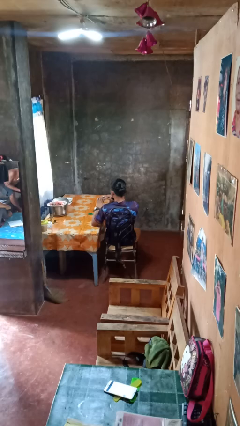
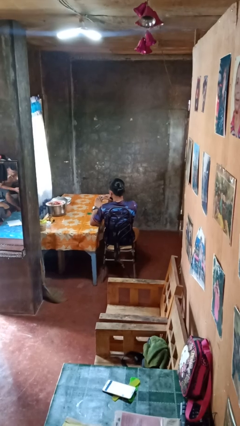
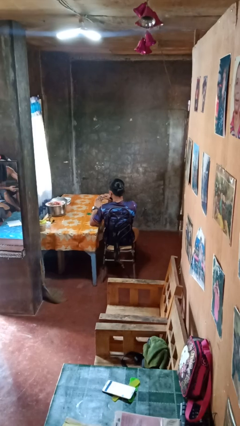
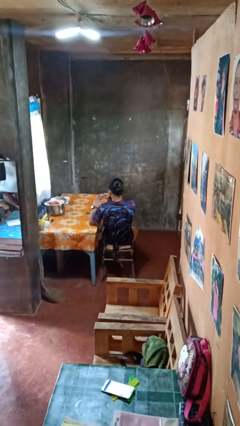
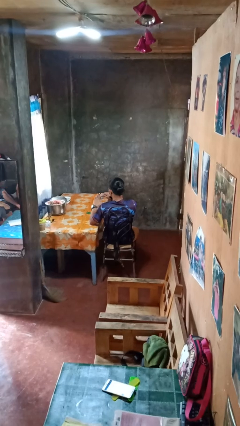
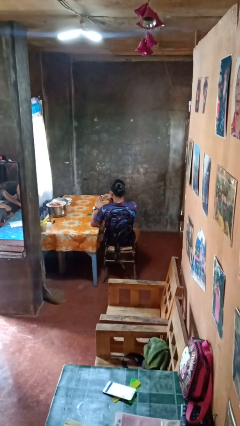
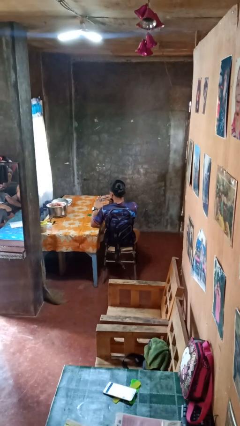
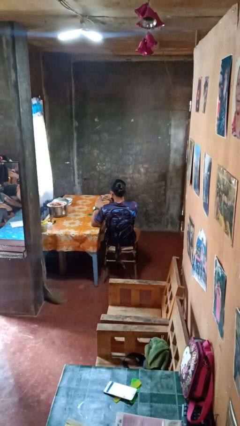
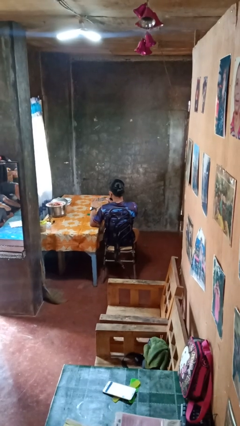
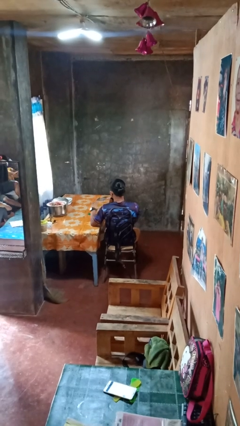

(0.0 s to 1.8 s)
person files fingernails

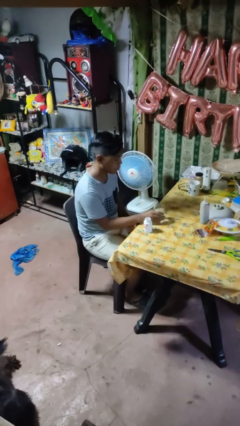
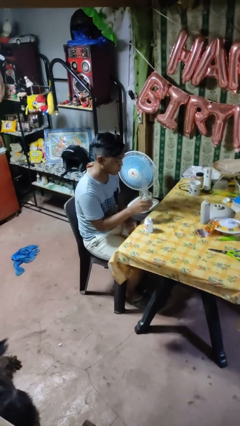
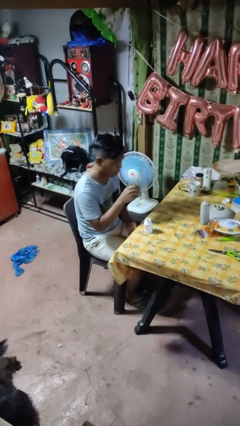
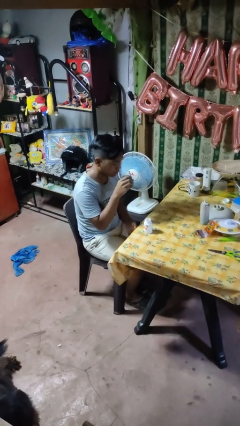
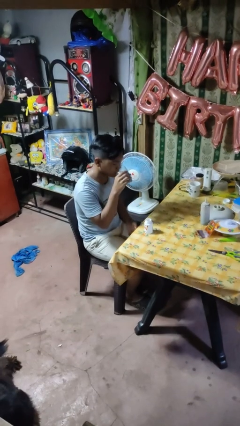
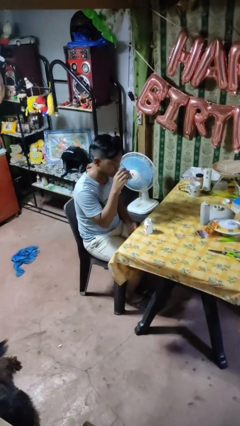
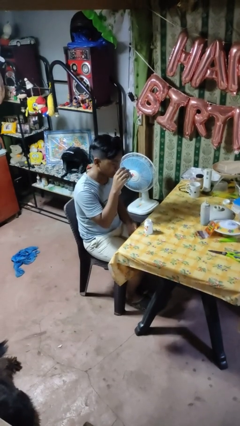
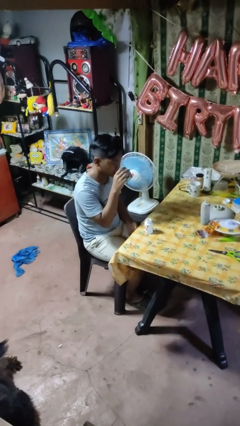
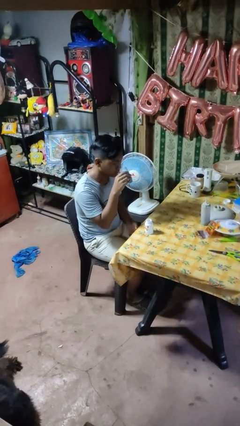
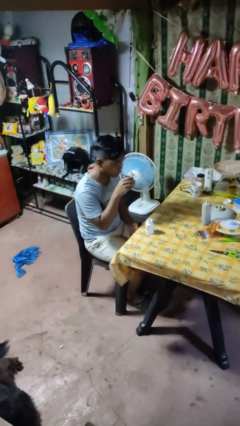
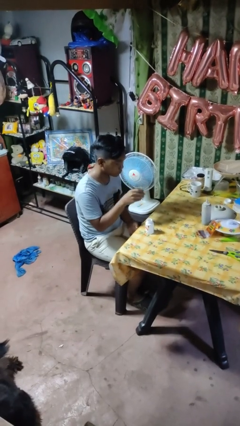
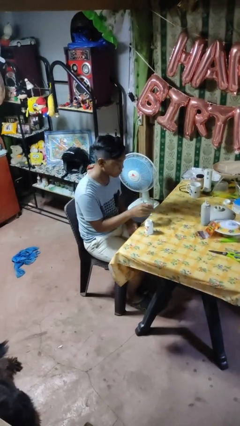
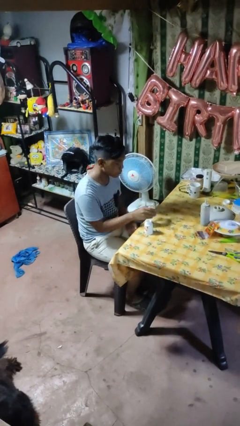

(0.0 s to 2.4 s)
person drinks from cup

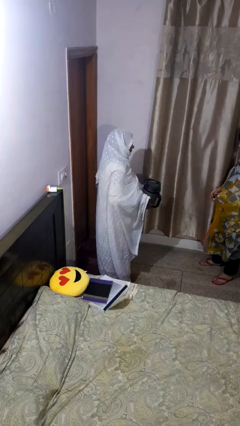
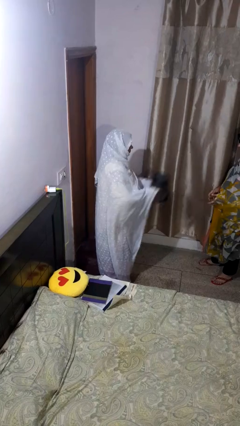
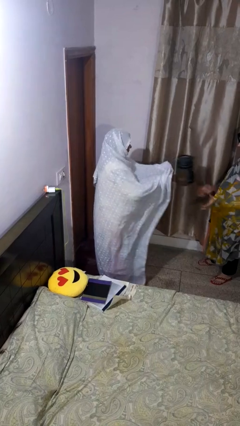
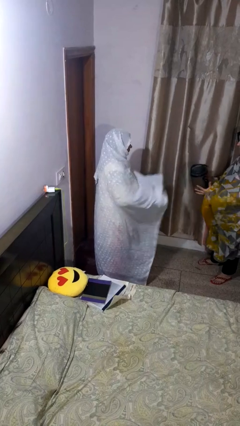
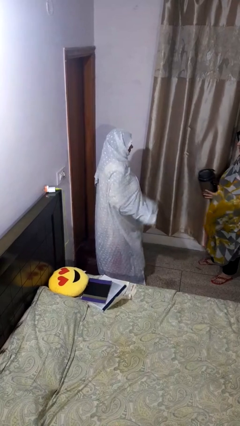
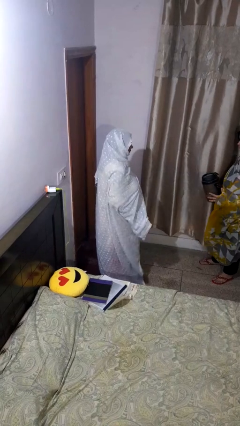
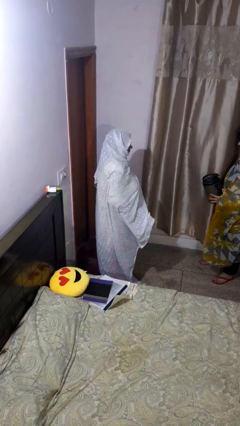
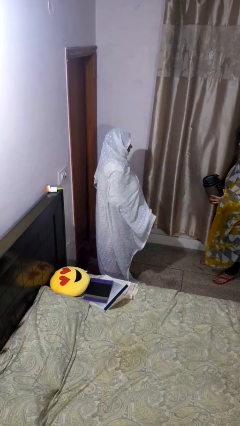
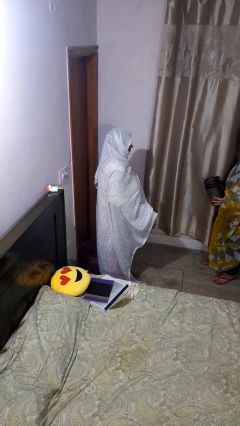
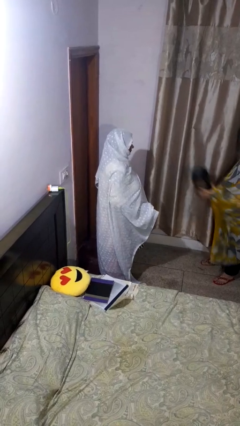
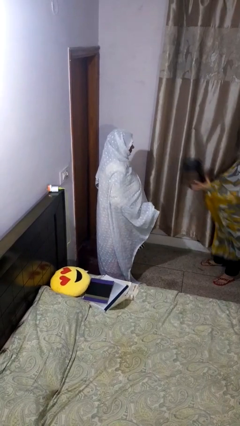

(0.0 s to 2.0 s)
person throws object to person

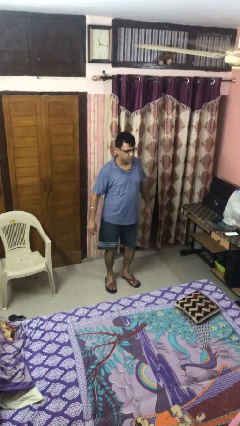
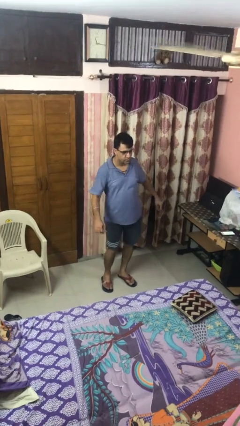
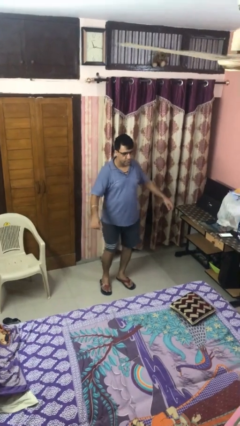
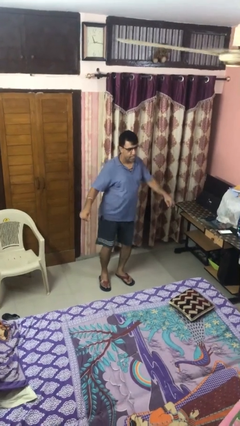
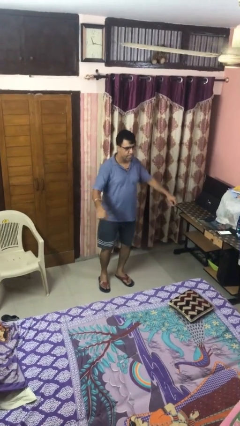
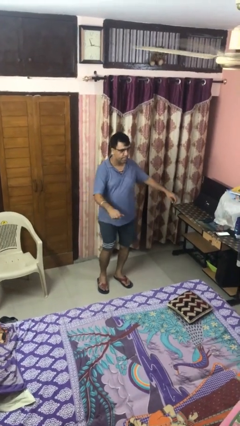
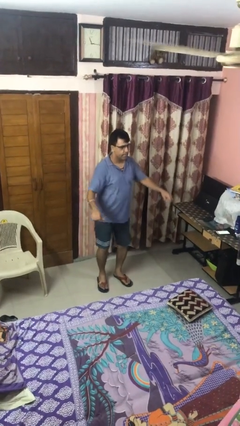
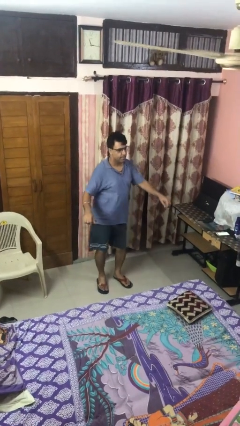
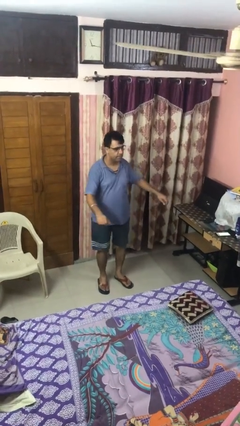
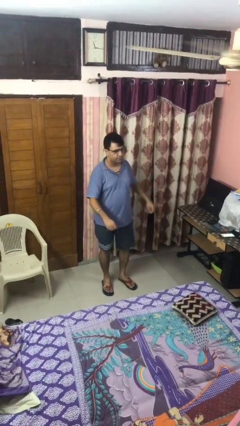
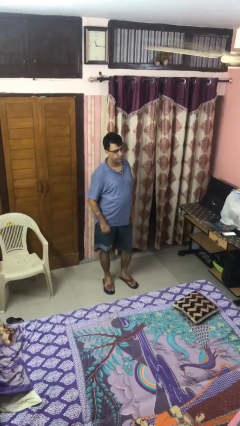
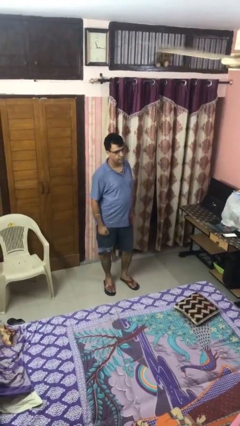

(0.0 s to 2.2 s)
person dances in place

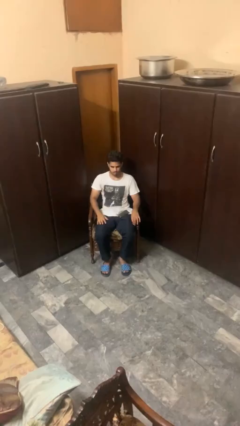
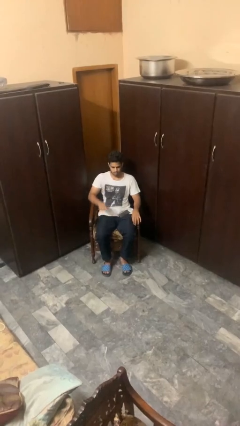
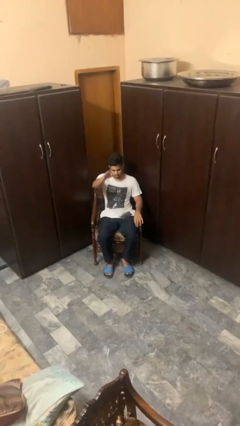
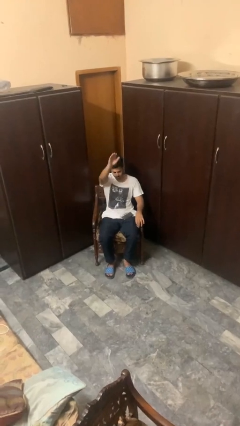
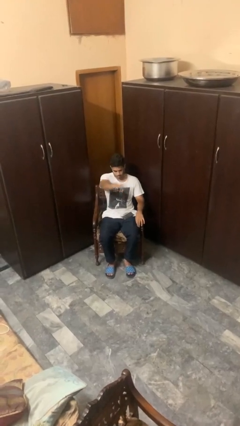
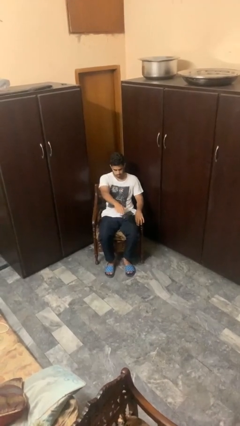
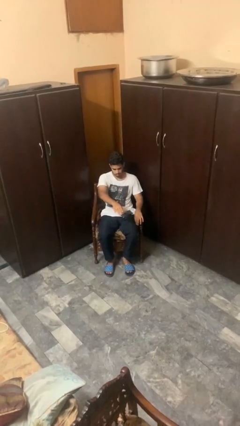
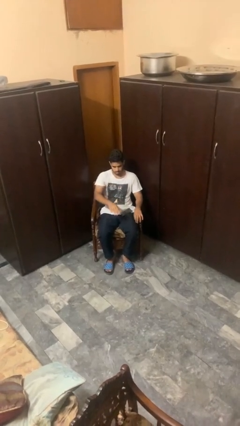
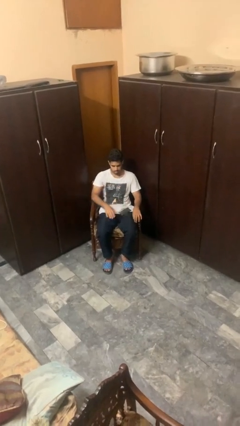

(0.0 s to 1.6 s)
person gestures swipe down

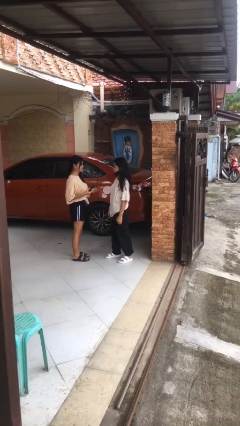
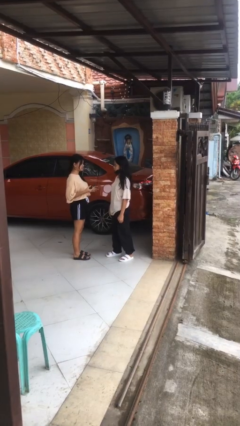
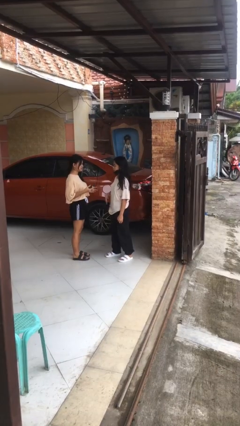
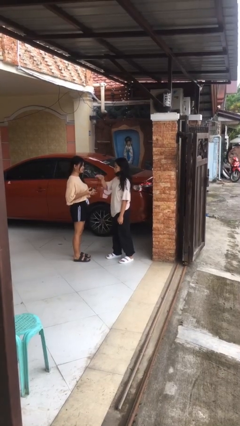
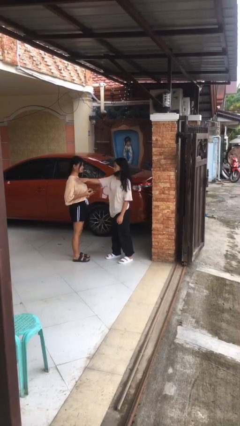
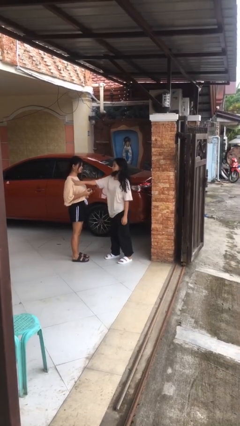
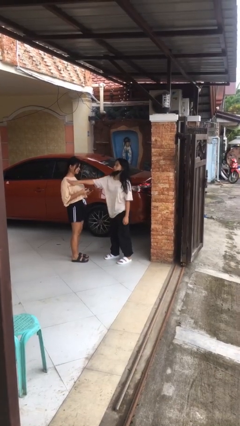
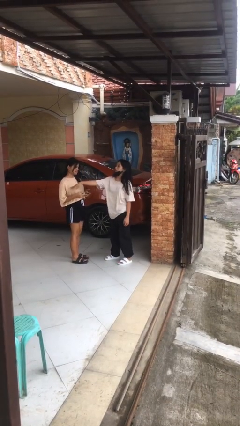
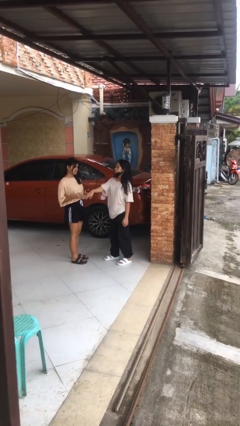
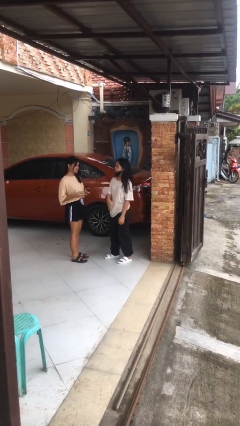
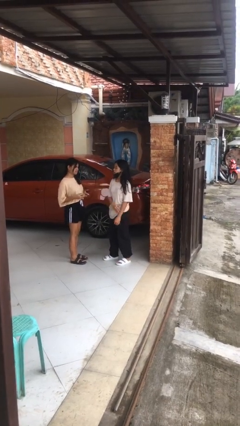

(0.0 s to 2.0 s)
person shoves person

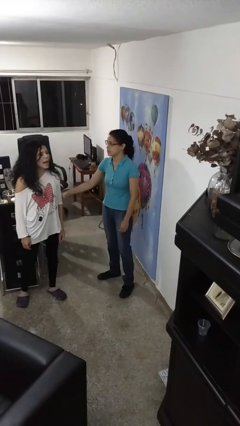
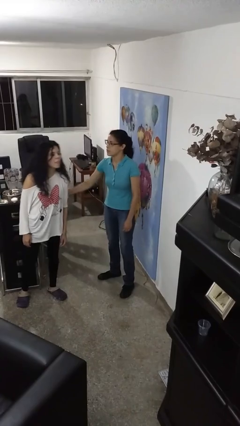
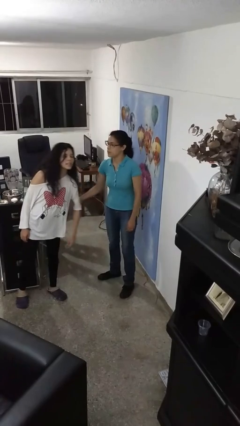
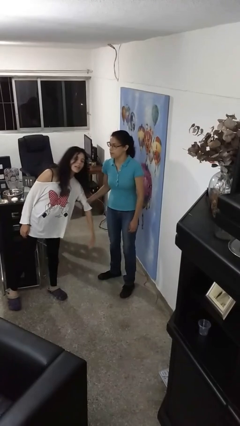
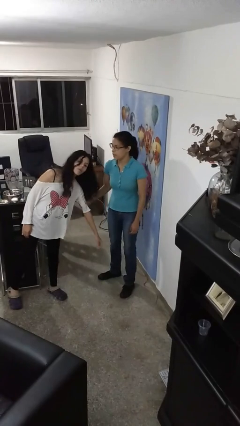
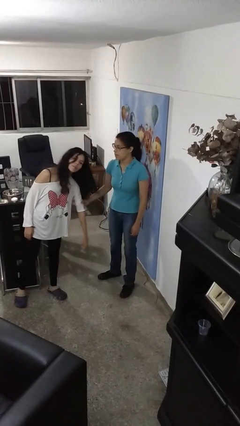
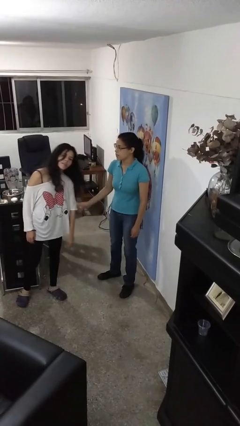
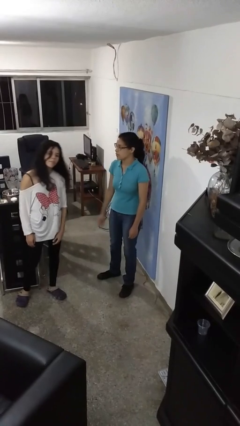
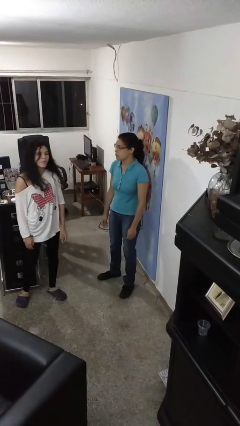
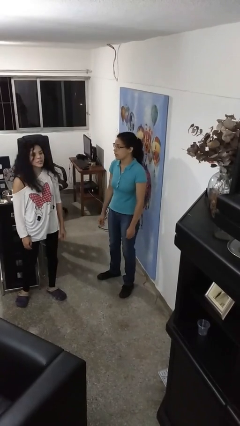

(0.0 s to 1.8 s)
person grabs person by bicep

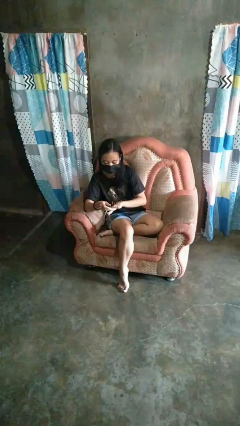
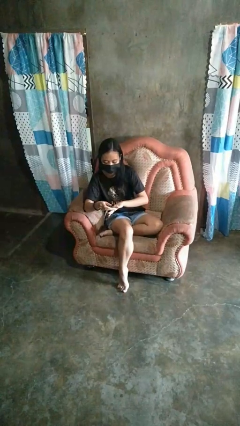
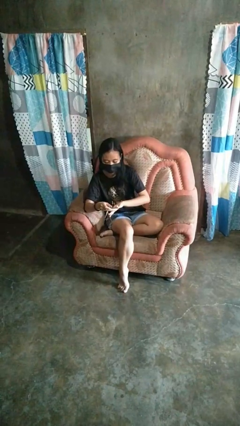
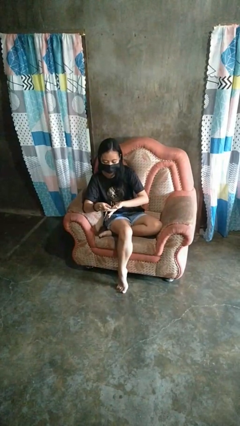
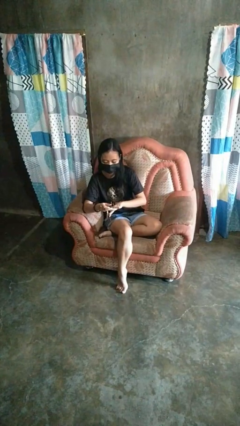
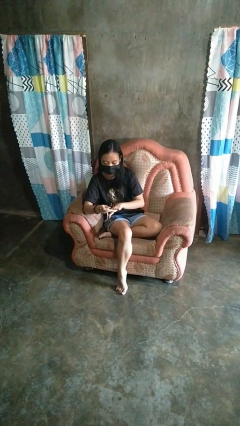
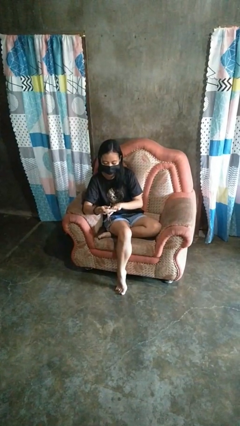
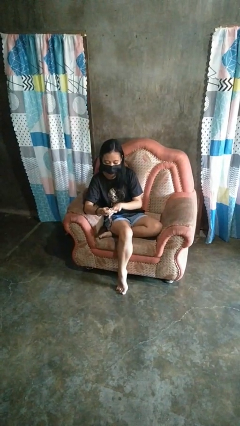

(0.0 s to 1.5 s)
person clips fingernails

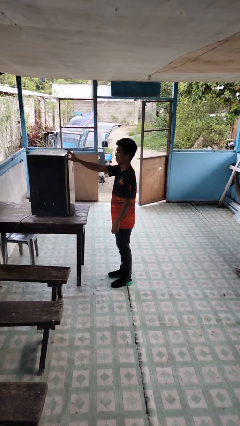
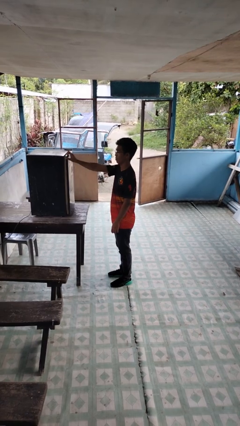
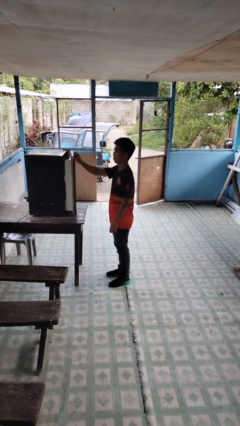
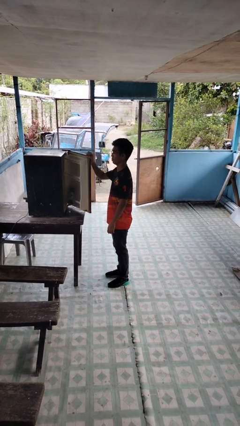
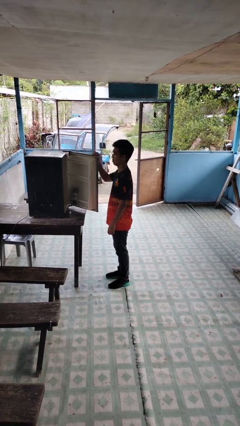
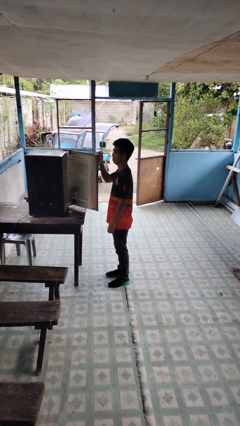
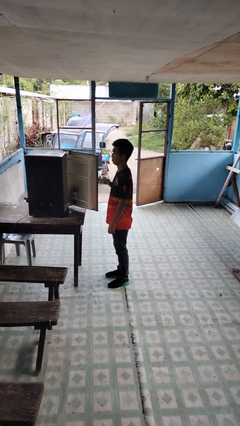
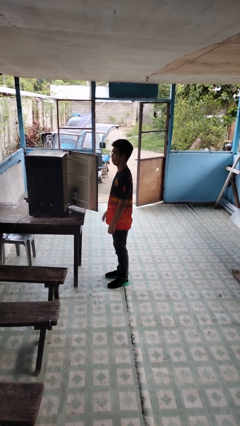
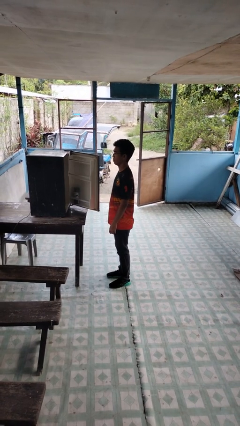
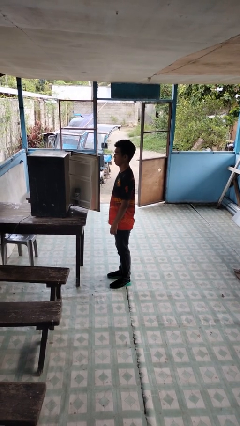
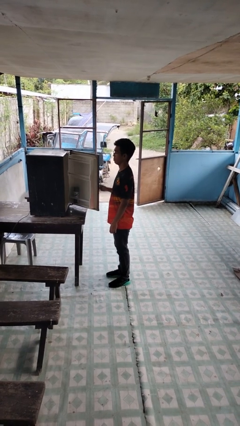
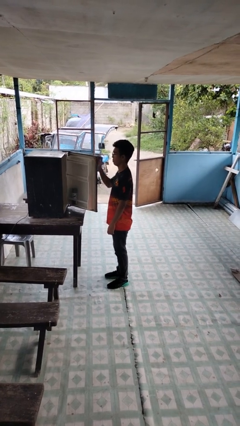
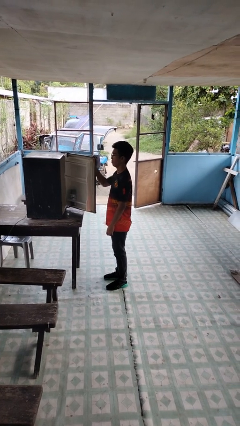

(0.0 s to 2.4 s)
person opens refrigerator
